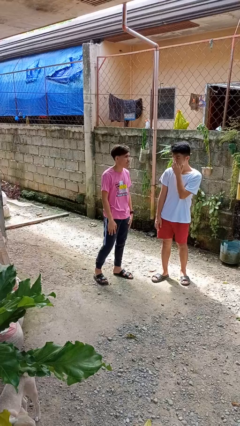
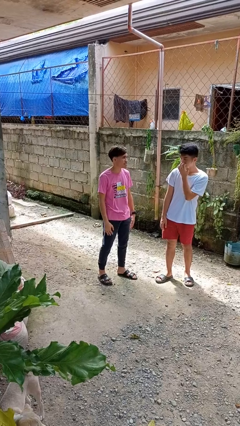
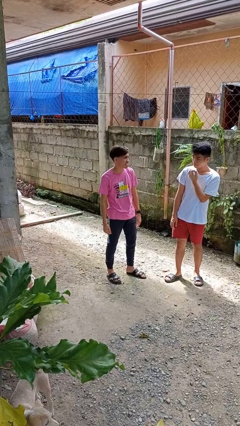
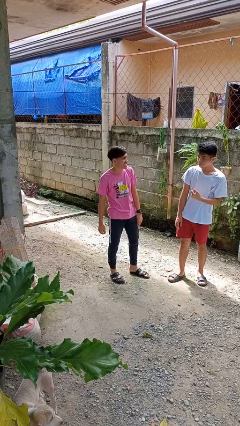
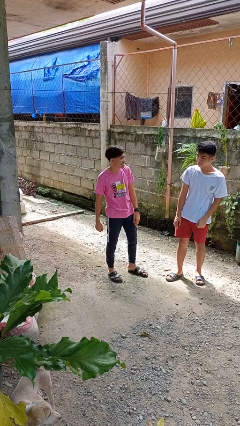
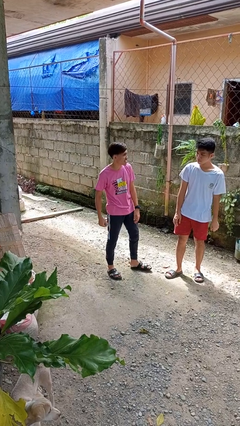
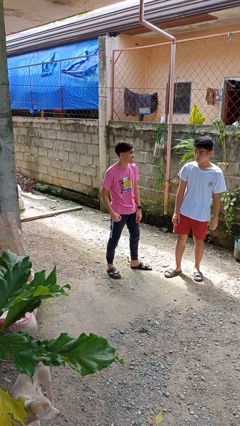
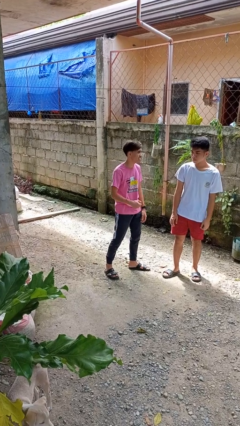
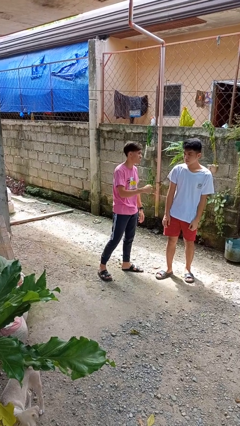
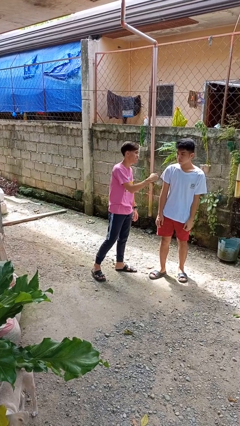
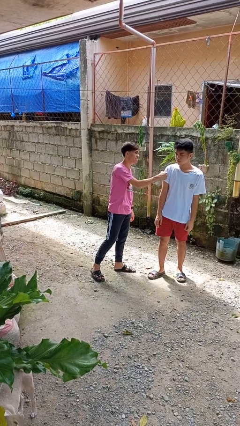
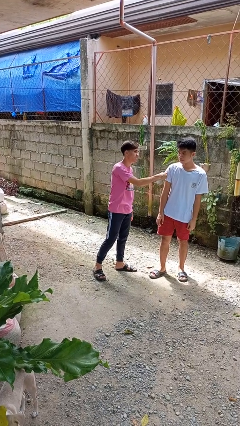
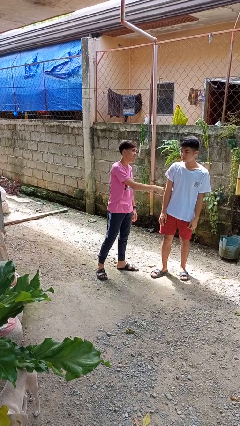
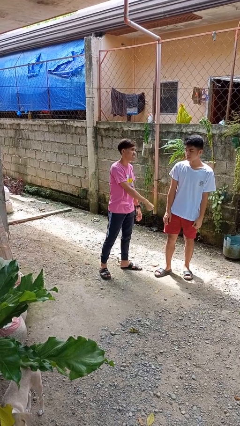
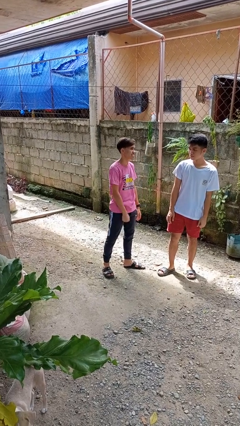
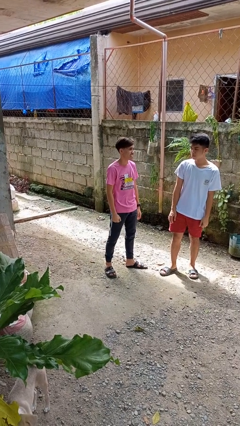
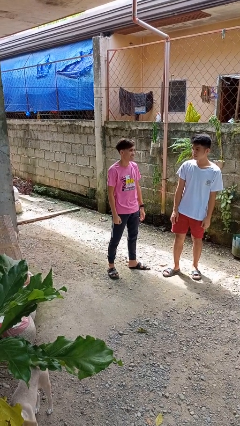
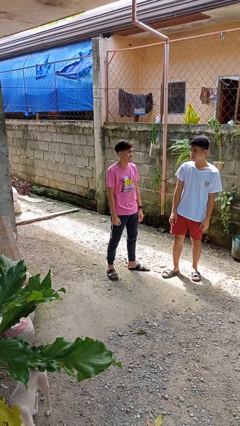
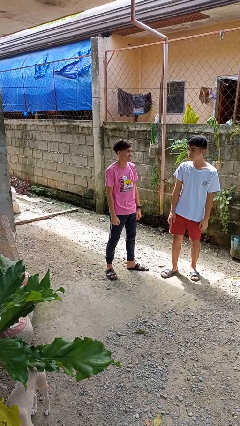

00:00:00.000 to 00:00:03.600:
person pounds shoulders of person

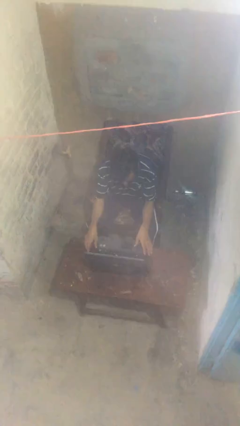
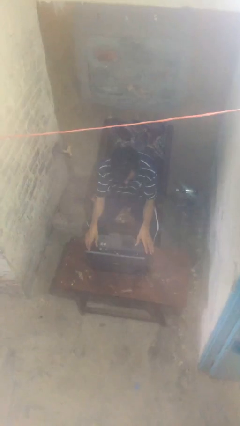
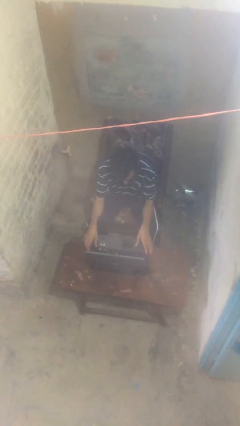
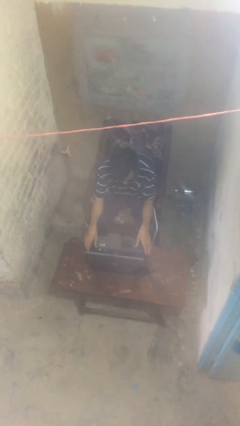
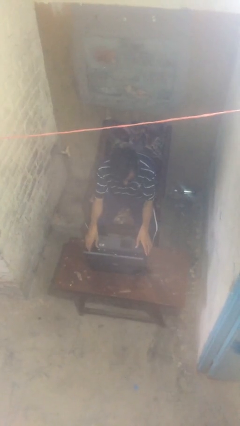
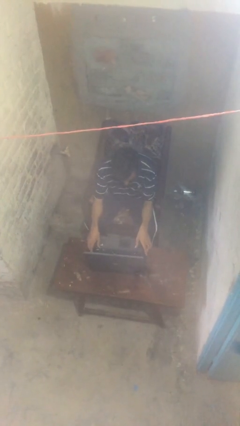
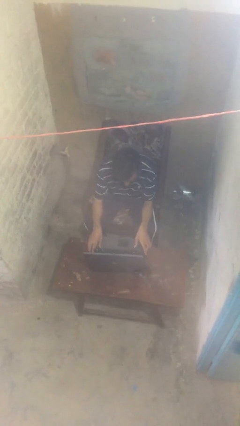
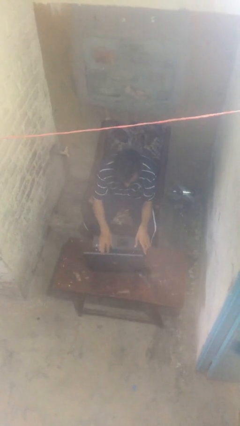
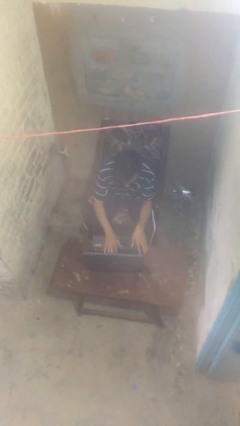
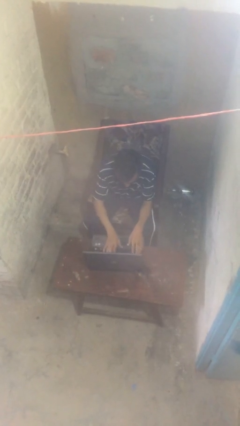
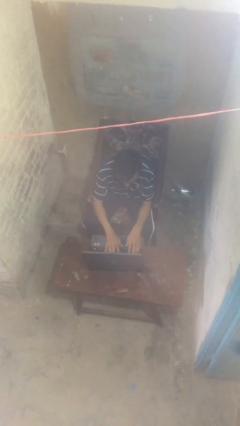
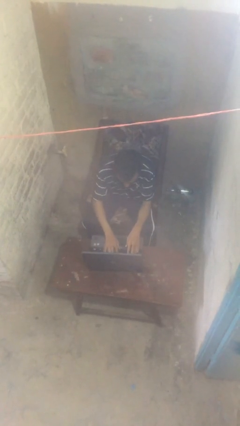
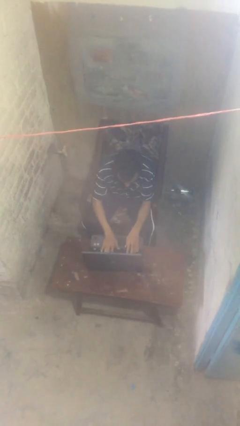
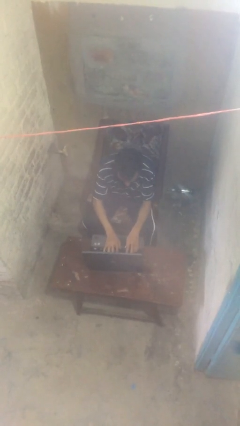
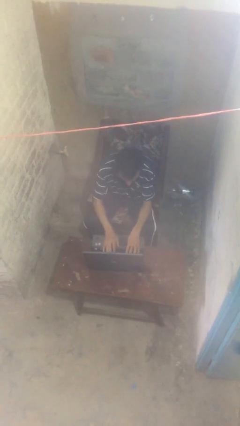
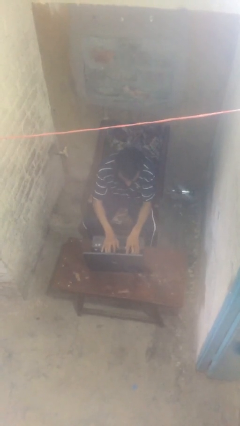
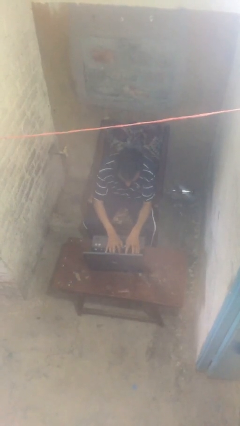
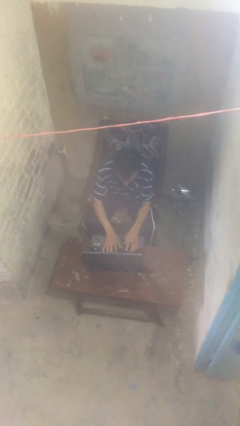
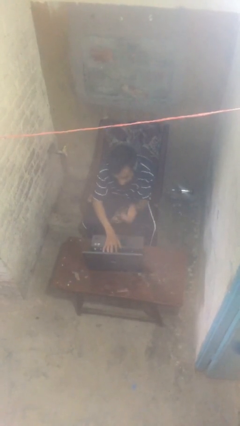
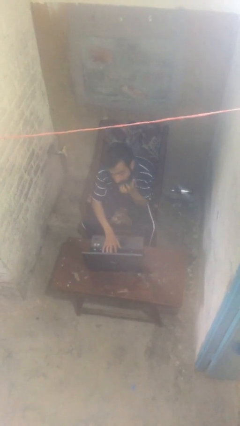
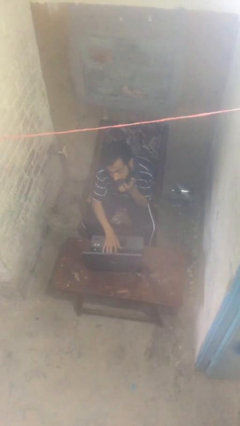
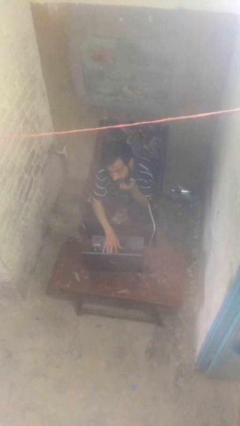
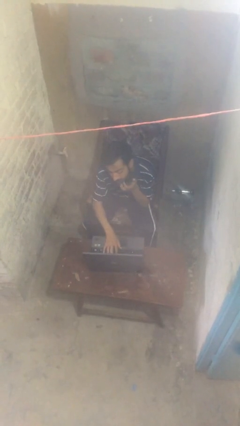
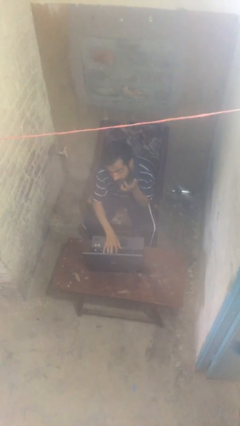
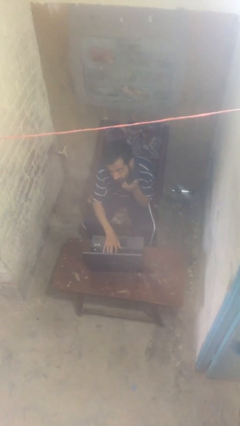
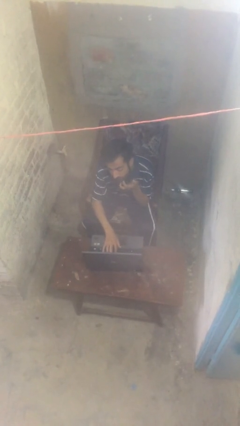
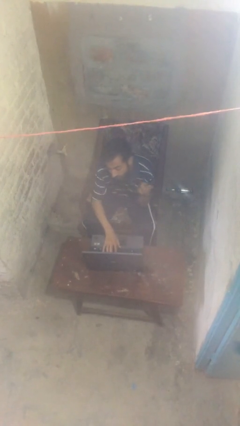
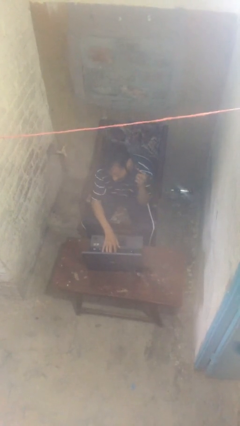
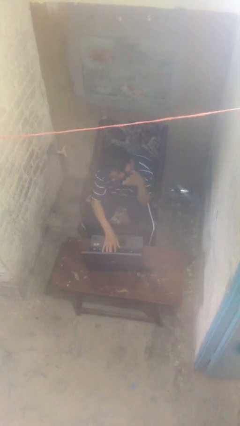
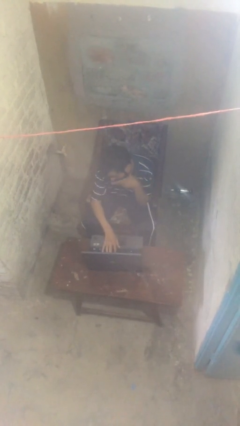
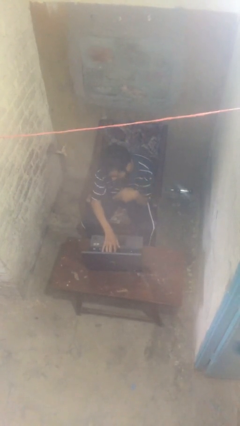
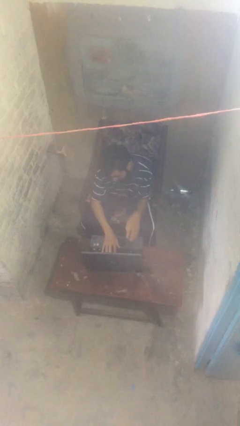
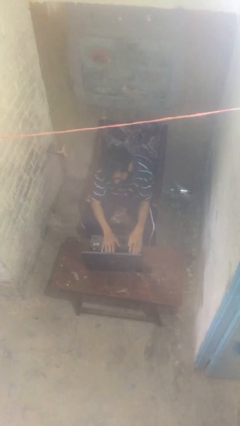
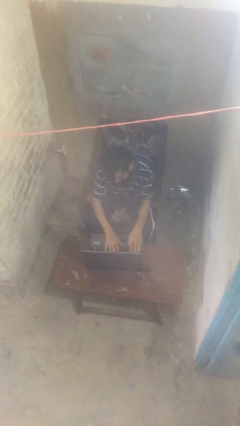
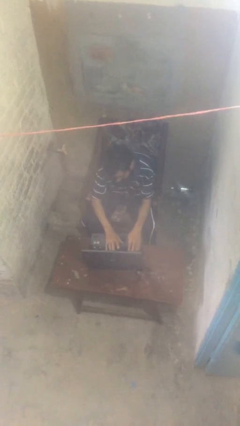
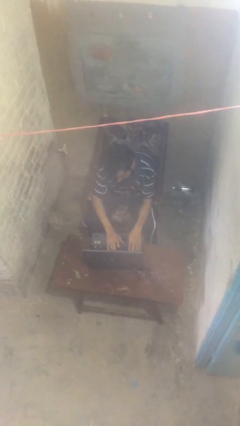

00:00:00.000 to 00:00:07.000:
person interacts with laptop

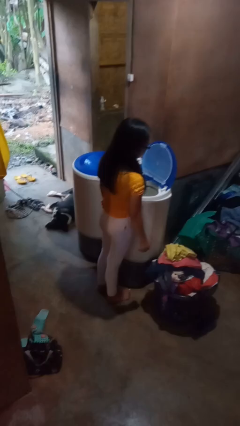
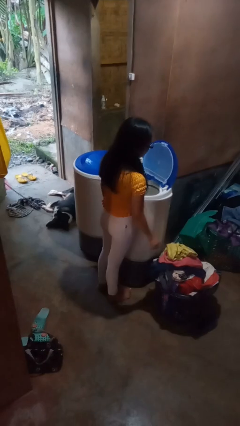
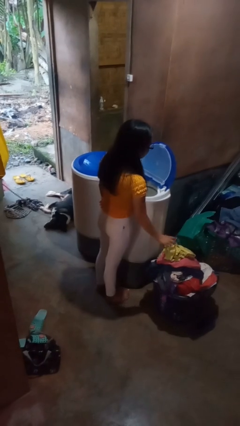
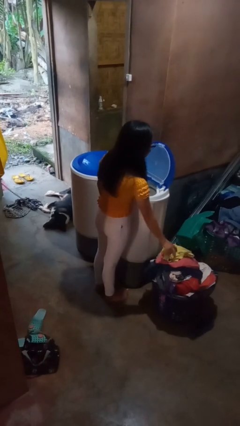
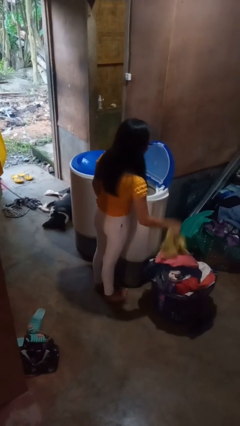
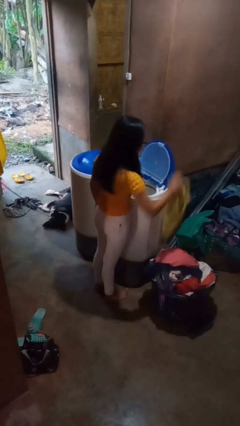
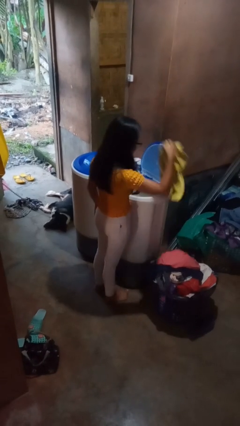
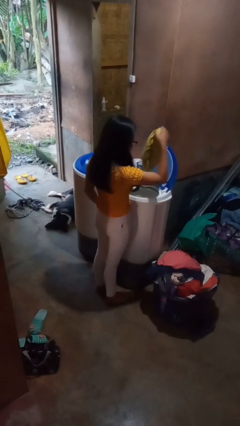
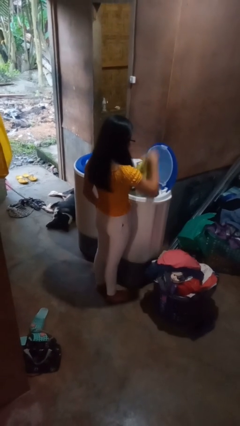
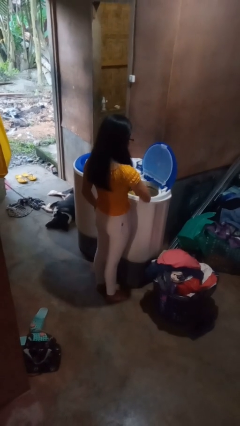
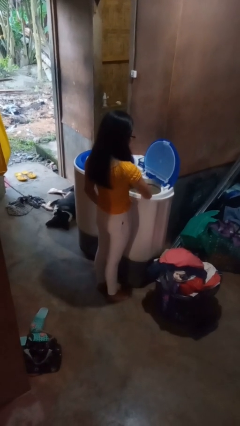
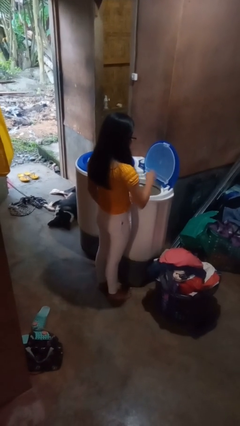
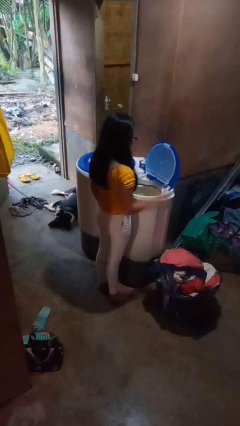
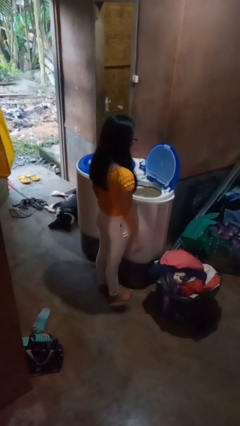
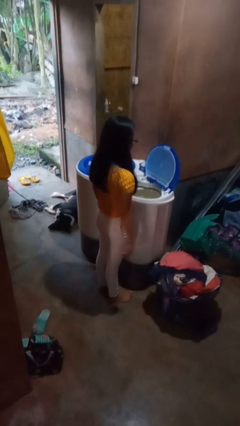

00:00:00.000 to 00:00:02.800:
person loads dryer

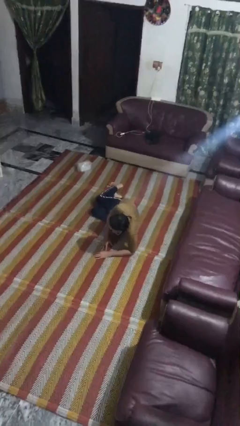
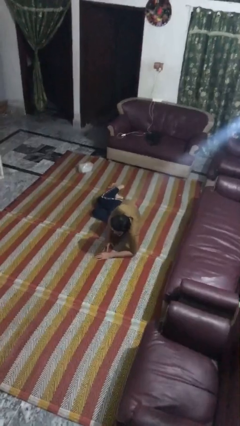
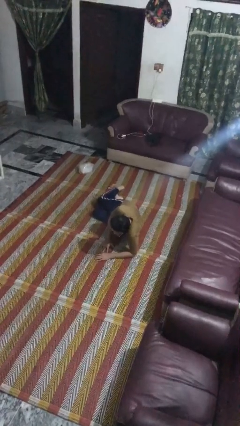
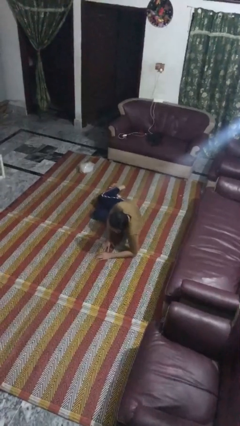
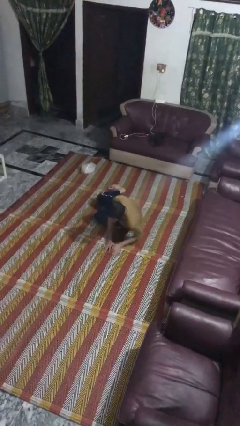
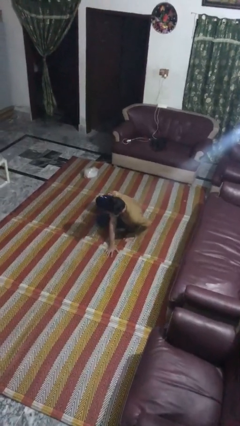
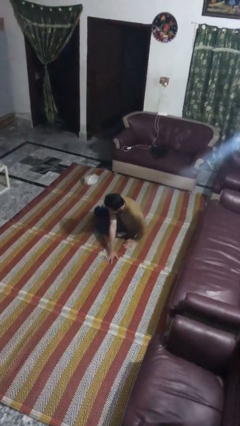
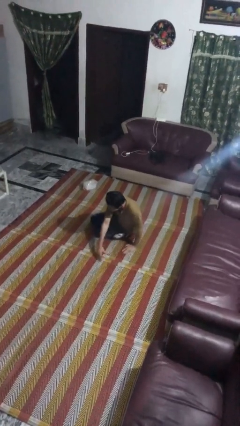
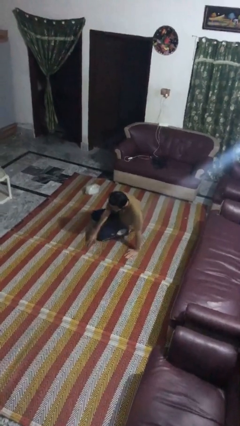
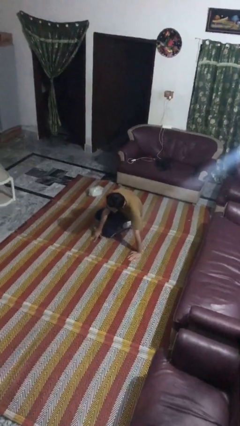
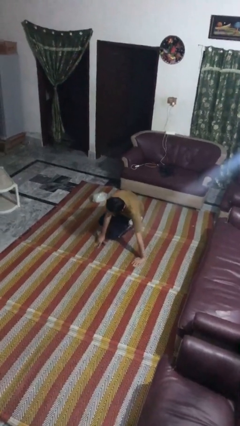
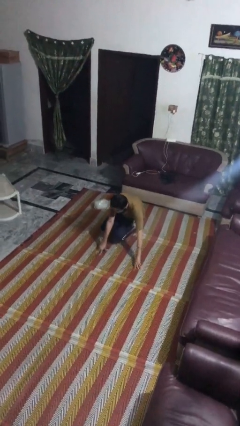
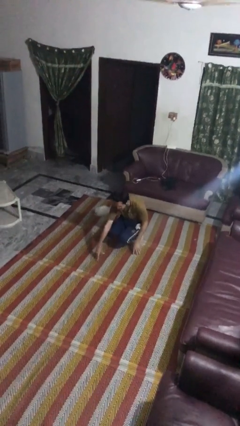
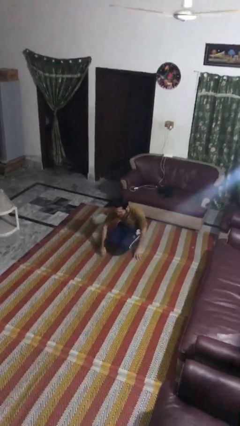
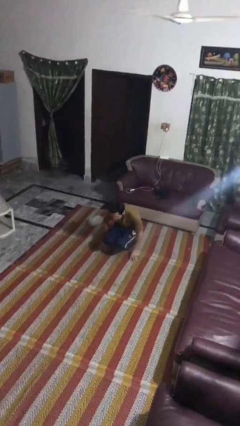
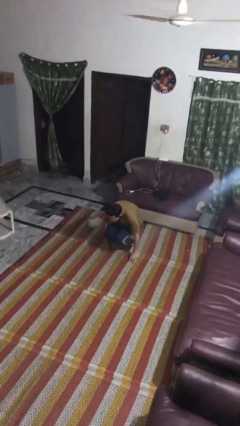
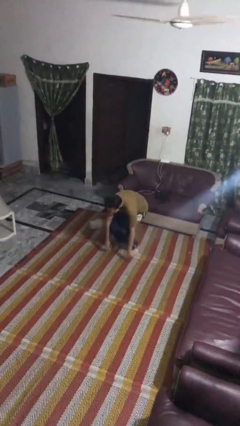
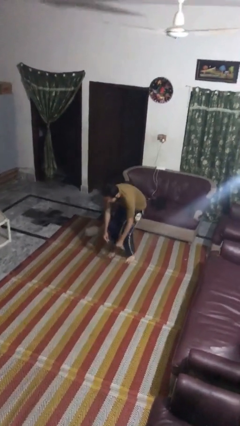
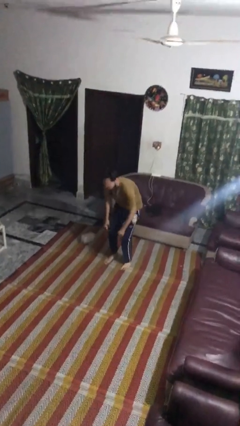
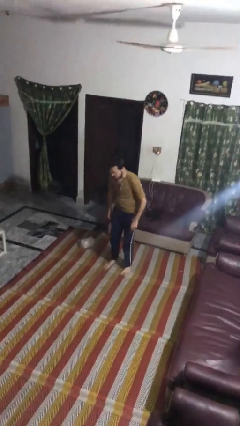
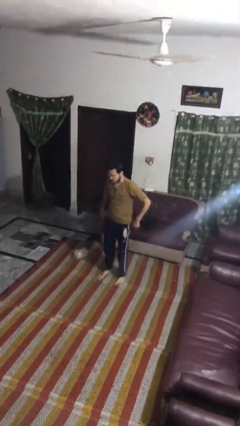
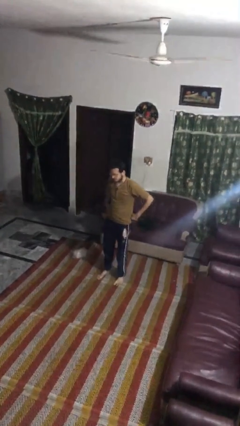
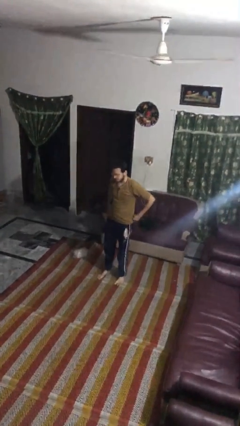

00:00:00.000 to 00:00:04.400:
person stands up from floor

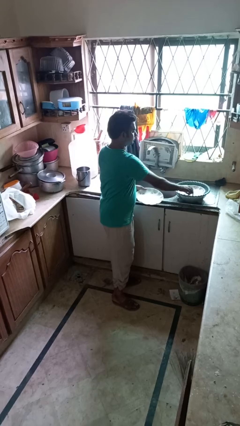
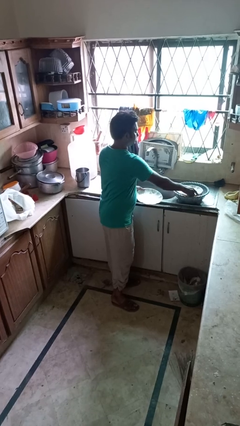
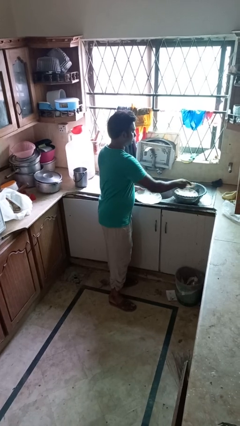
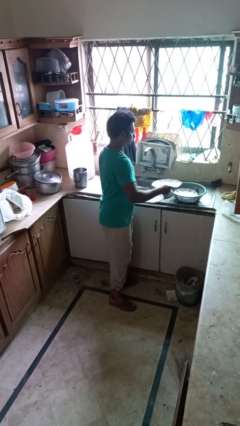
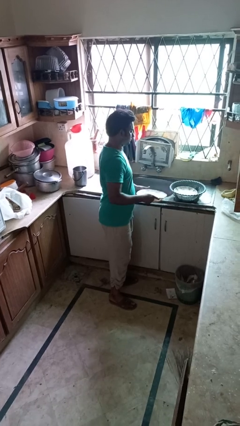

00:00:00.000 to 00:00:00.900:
person unloads dishwasher
